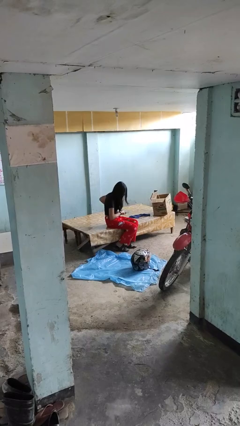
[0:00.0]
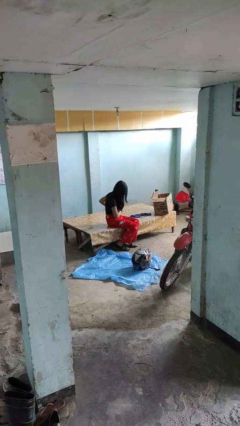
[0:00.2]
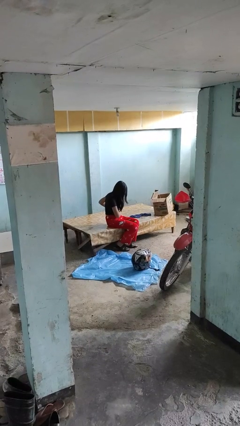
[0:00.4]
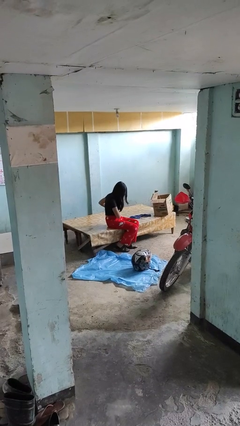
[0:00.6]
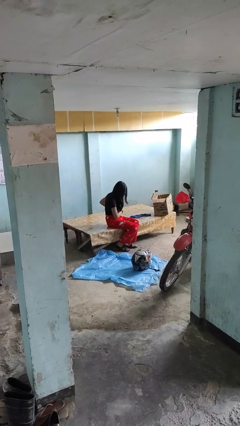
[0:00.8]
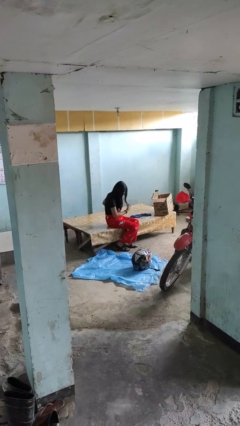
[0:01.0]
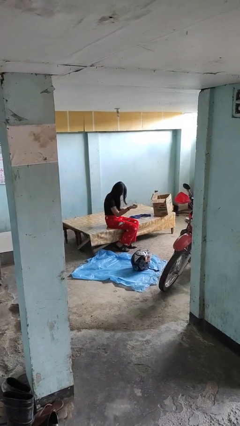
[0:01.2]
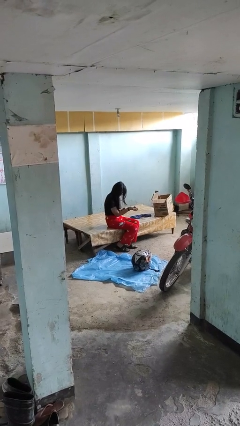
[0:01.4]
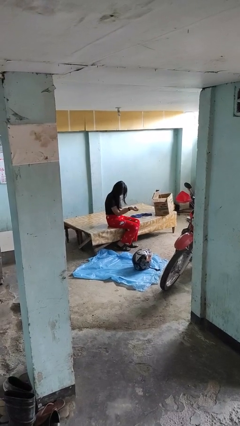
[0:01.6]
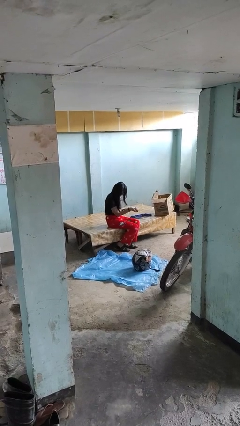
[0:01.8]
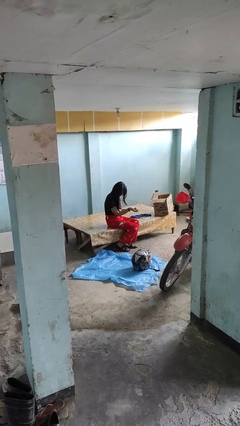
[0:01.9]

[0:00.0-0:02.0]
person puts phone into pocket

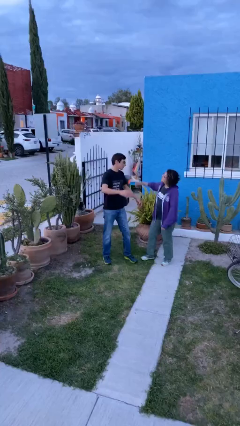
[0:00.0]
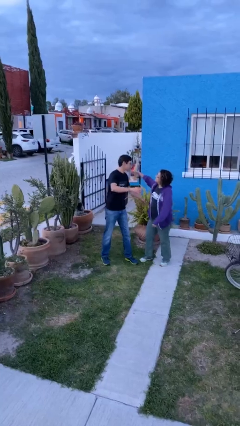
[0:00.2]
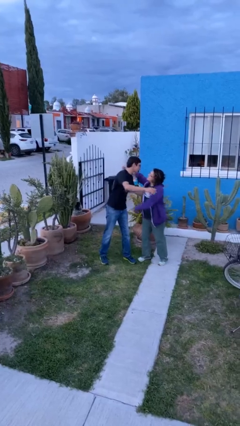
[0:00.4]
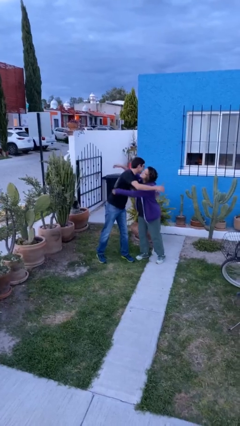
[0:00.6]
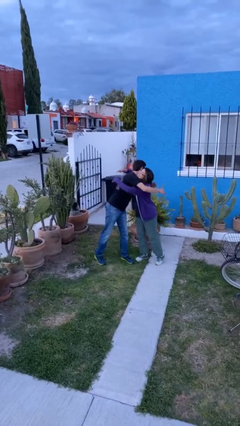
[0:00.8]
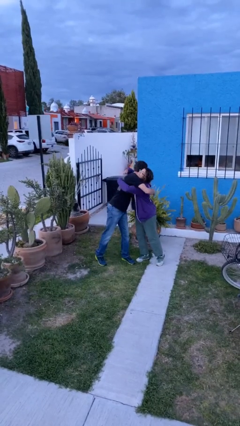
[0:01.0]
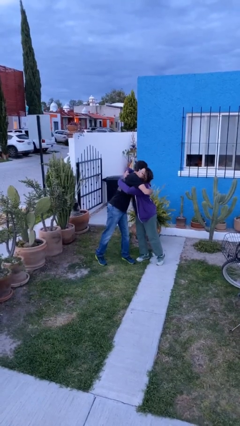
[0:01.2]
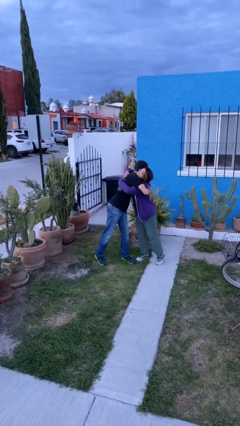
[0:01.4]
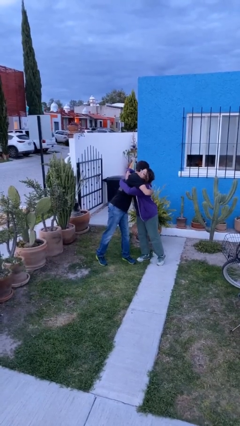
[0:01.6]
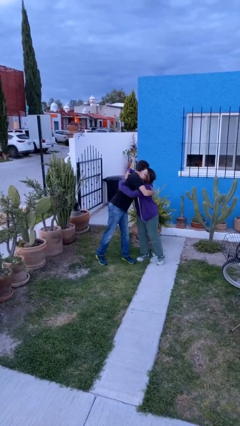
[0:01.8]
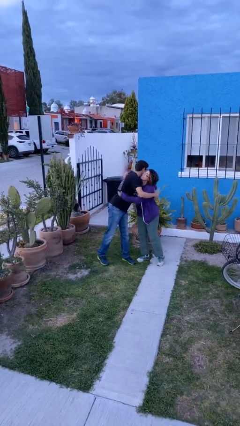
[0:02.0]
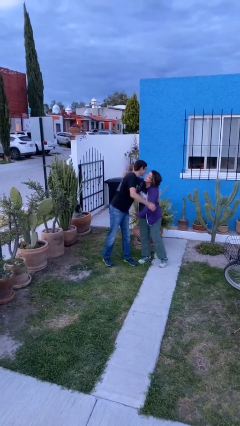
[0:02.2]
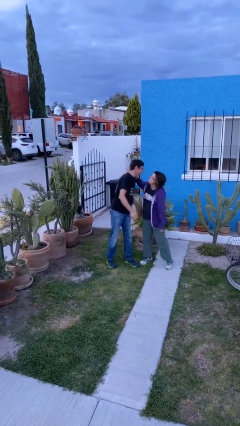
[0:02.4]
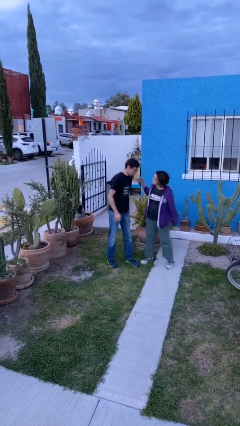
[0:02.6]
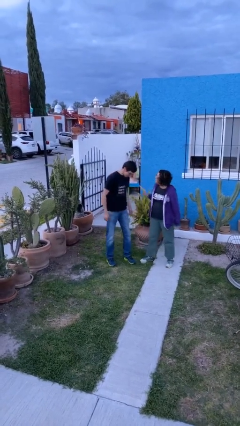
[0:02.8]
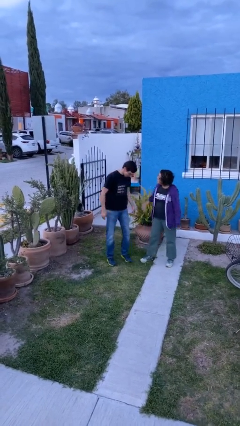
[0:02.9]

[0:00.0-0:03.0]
person embraces person

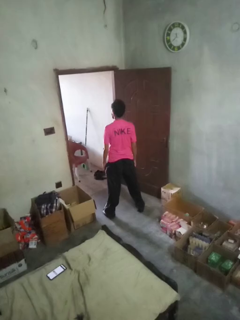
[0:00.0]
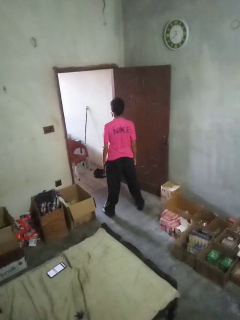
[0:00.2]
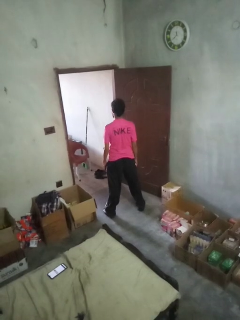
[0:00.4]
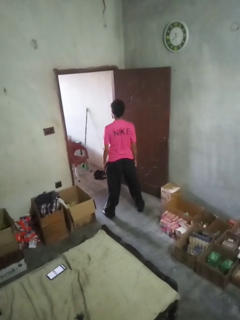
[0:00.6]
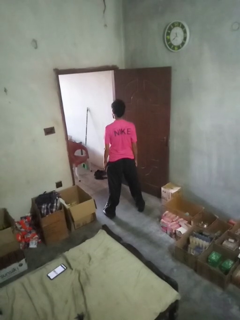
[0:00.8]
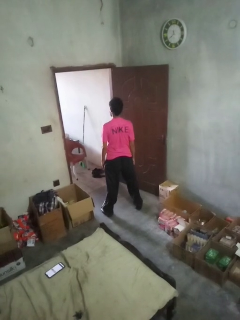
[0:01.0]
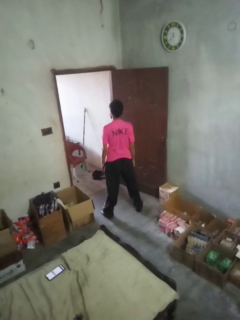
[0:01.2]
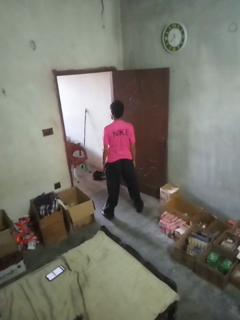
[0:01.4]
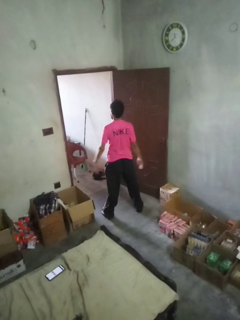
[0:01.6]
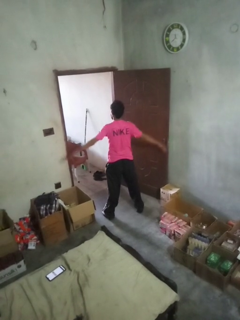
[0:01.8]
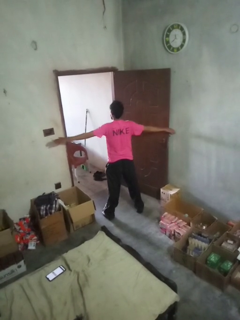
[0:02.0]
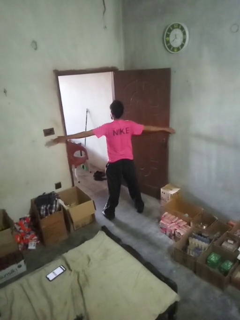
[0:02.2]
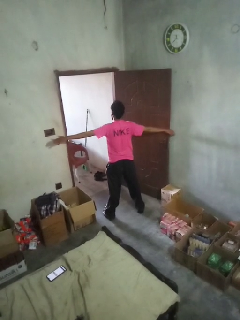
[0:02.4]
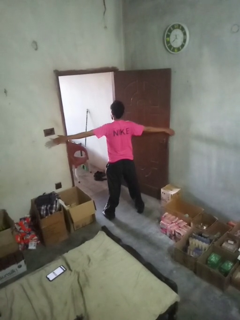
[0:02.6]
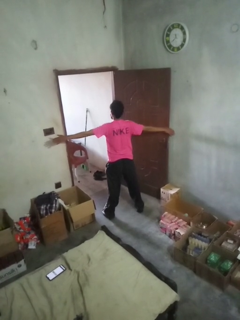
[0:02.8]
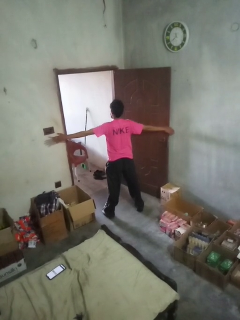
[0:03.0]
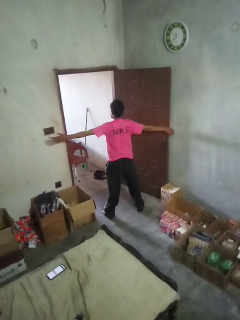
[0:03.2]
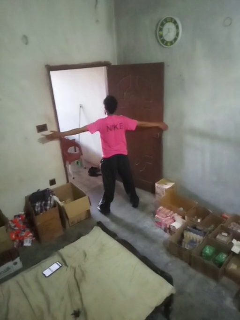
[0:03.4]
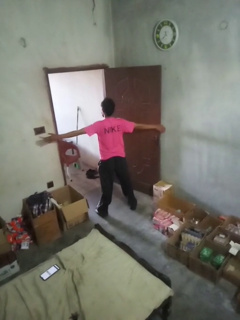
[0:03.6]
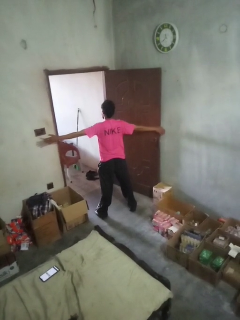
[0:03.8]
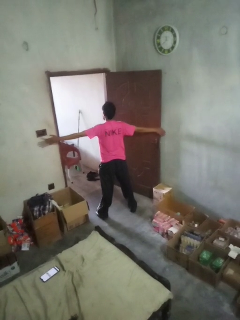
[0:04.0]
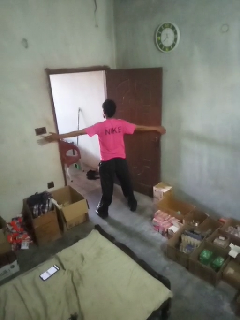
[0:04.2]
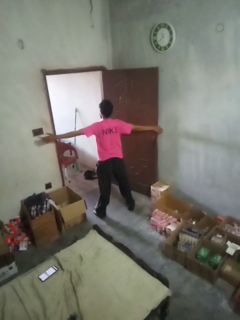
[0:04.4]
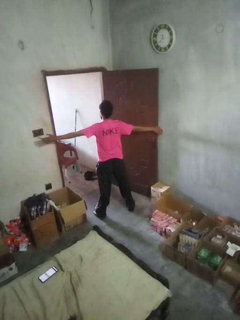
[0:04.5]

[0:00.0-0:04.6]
person stretches arms to side

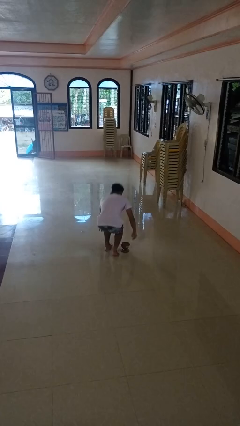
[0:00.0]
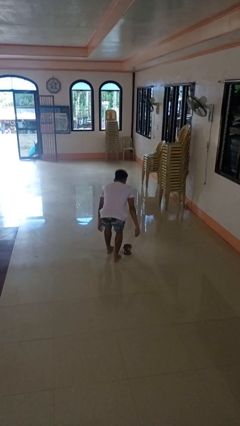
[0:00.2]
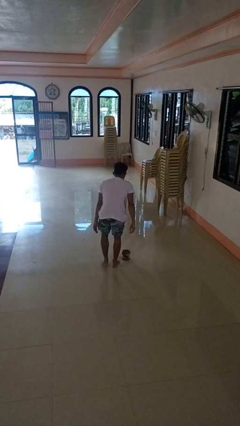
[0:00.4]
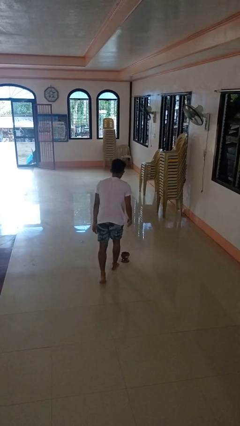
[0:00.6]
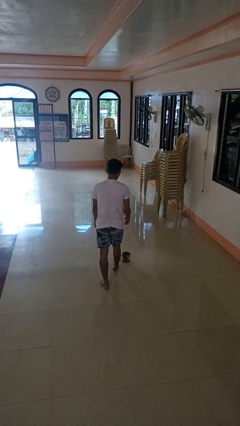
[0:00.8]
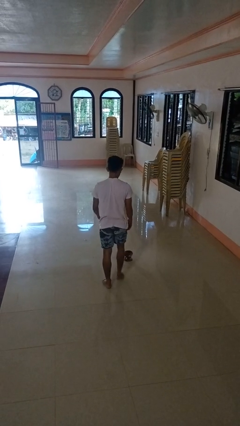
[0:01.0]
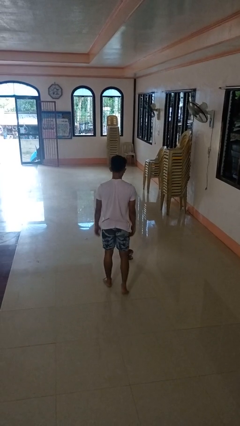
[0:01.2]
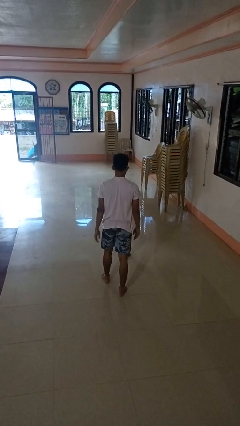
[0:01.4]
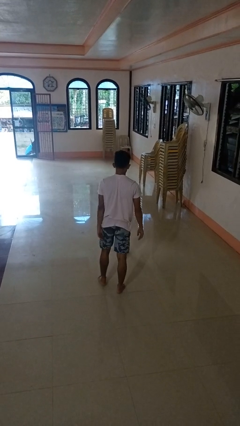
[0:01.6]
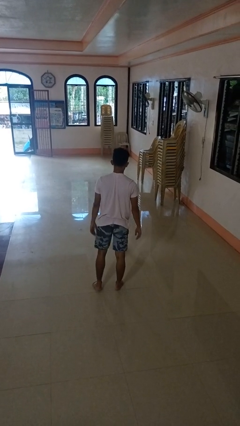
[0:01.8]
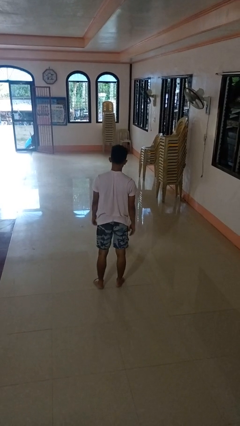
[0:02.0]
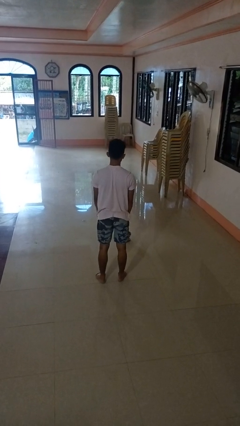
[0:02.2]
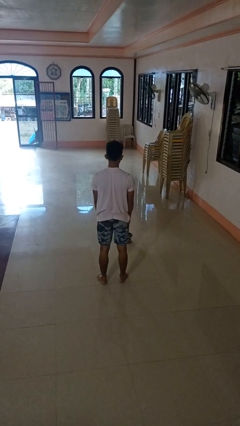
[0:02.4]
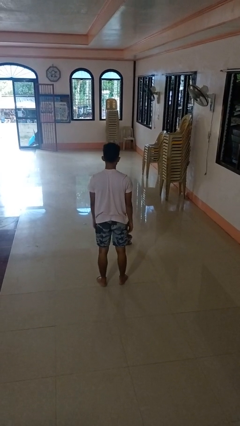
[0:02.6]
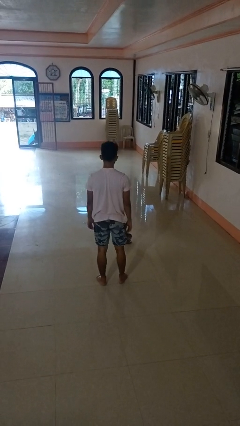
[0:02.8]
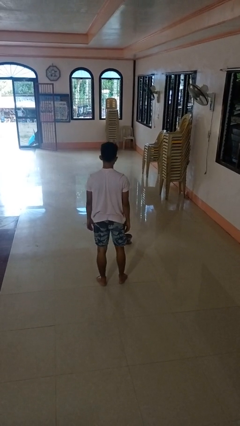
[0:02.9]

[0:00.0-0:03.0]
person stands up from floor

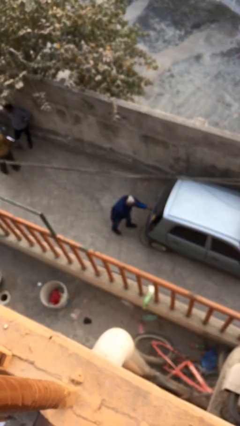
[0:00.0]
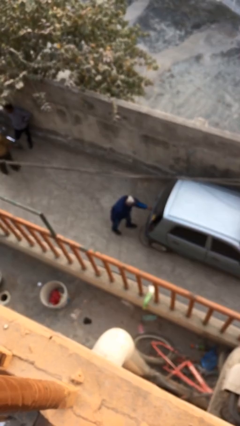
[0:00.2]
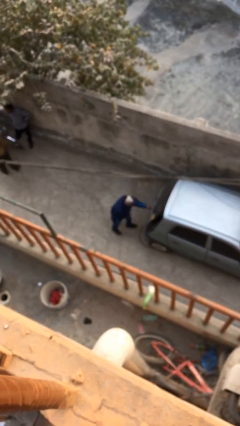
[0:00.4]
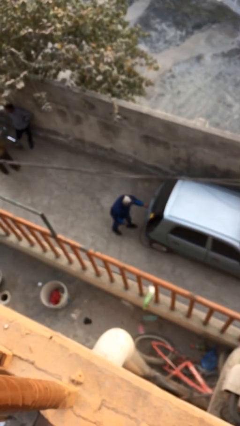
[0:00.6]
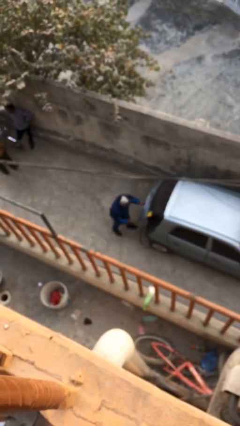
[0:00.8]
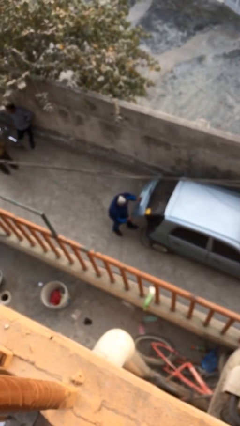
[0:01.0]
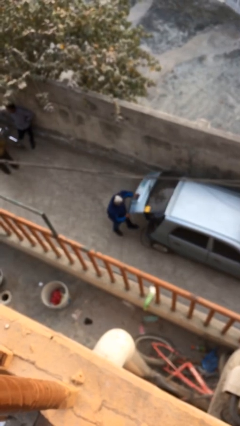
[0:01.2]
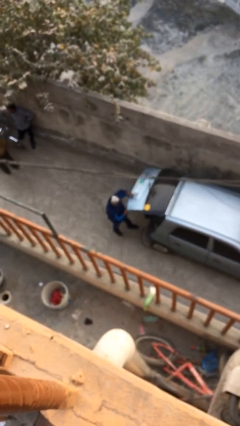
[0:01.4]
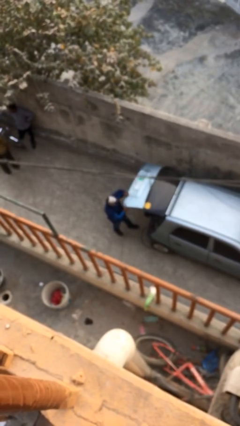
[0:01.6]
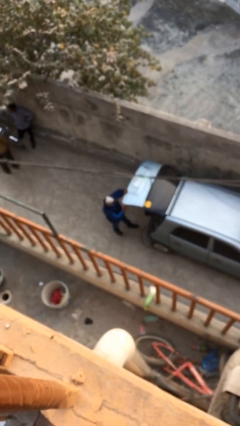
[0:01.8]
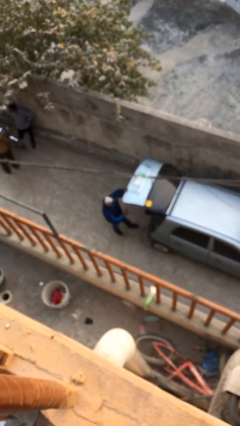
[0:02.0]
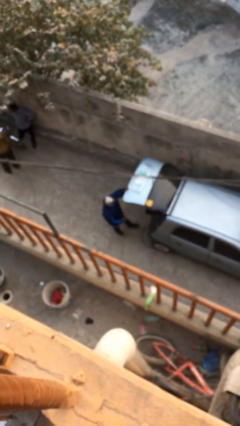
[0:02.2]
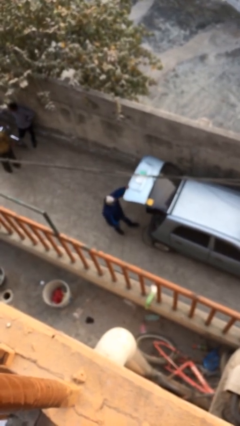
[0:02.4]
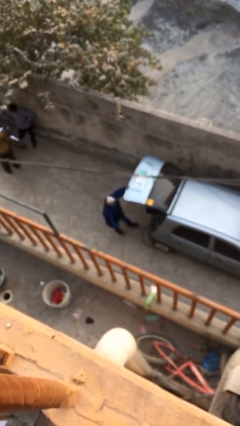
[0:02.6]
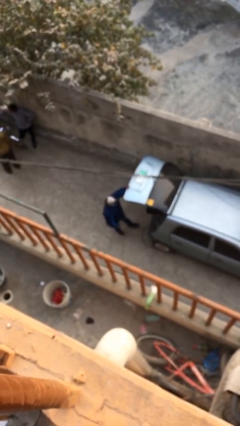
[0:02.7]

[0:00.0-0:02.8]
person opens car trunk

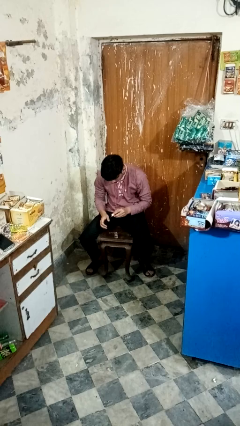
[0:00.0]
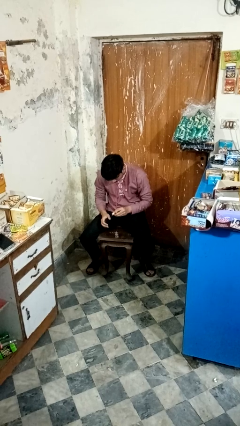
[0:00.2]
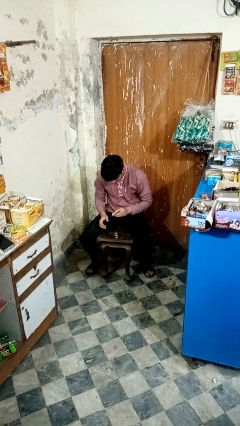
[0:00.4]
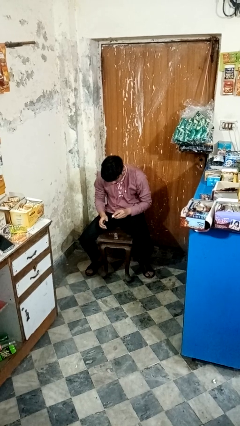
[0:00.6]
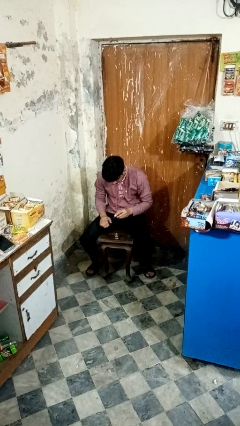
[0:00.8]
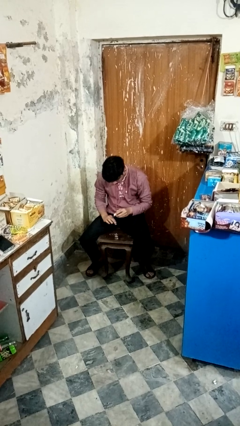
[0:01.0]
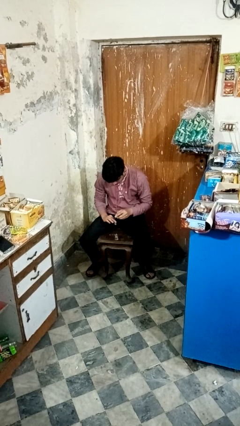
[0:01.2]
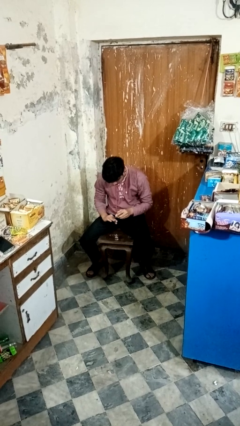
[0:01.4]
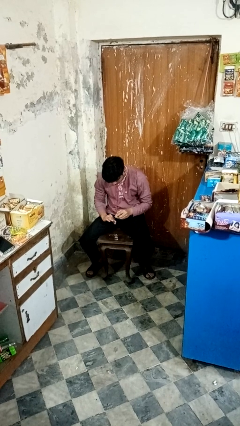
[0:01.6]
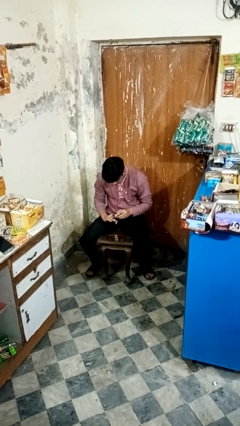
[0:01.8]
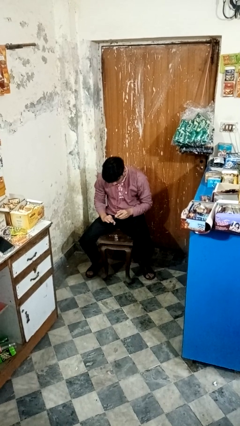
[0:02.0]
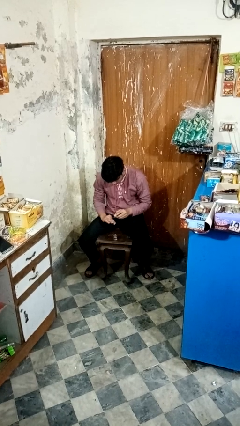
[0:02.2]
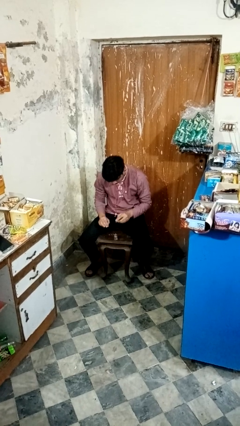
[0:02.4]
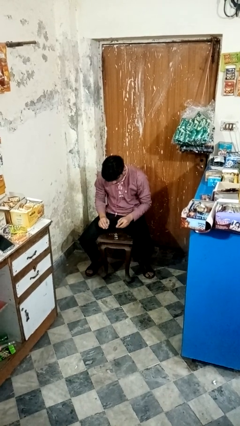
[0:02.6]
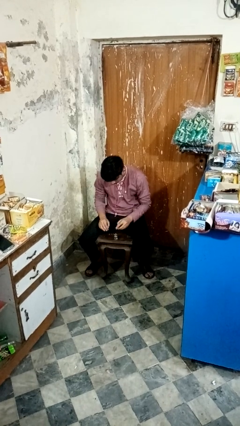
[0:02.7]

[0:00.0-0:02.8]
person paints fingernails

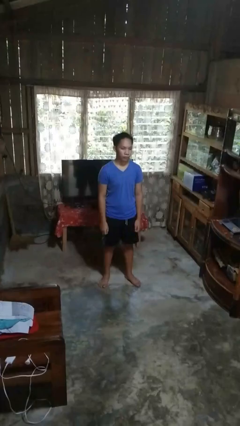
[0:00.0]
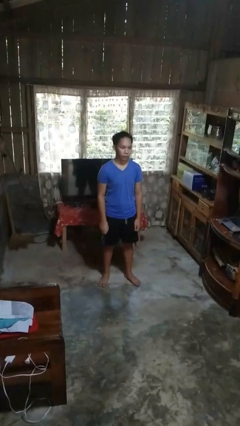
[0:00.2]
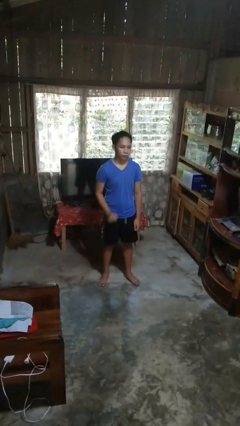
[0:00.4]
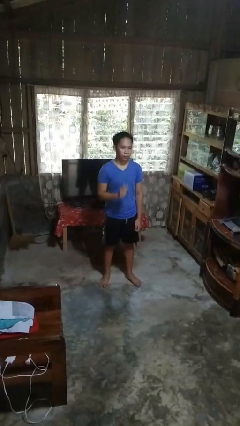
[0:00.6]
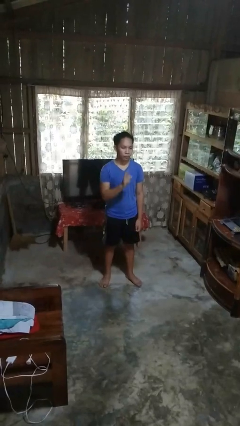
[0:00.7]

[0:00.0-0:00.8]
person gestures number one
